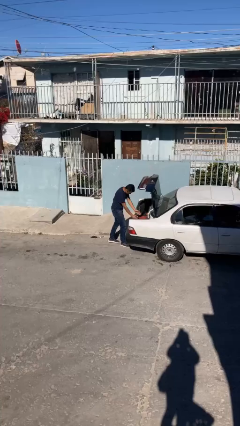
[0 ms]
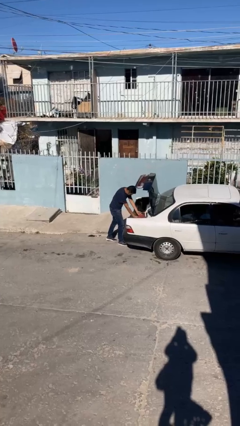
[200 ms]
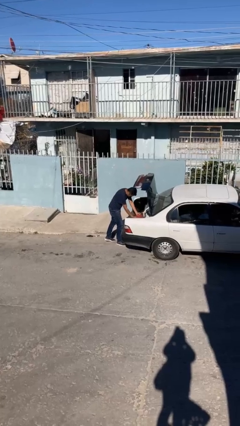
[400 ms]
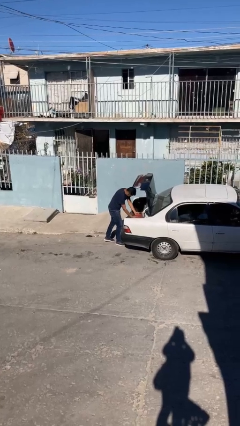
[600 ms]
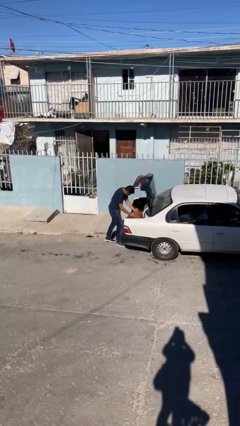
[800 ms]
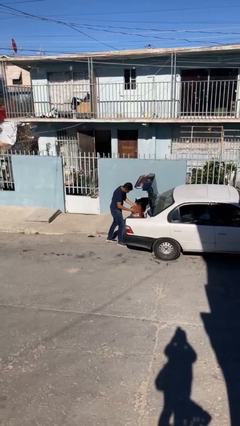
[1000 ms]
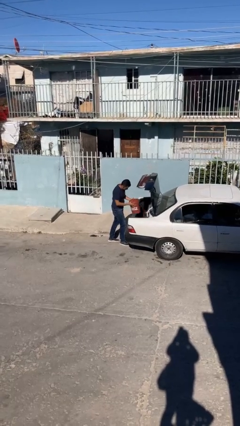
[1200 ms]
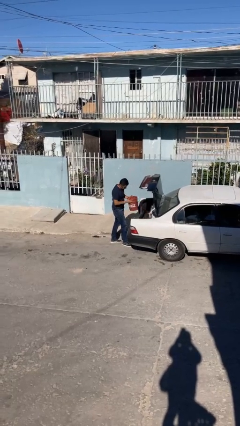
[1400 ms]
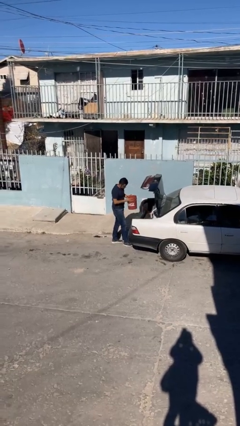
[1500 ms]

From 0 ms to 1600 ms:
person unloads car

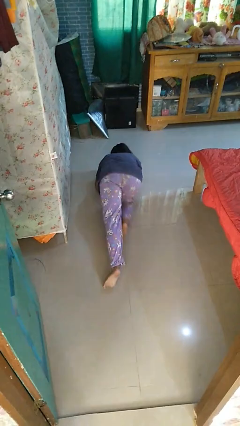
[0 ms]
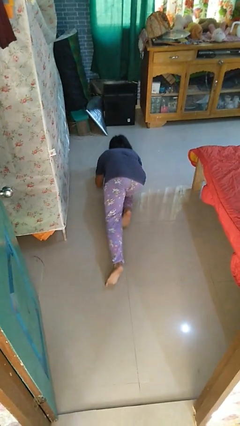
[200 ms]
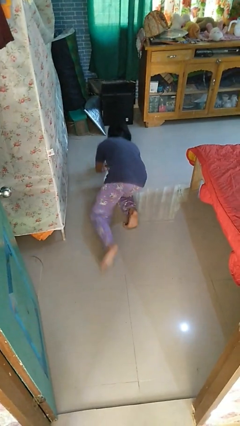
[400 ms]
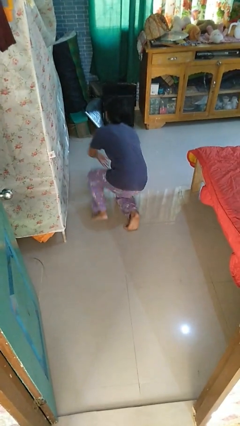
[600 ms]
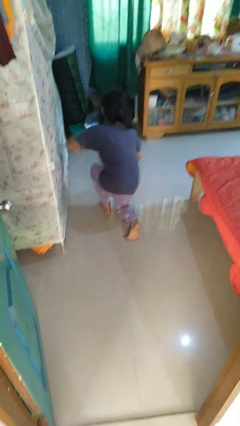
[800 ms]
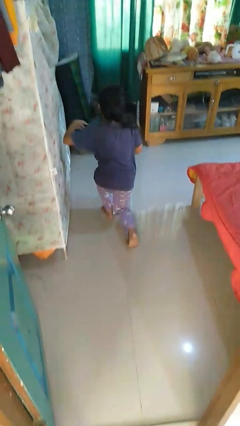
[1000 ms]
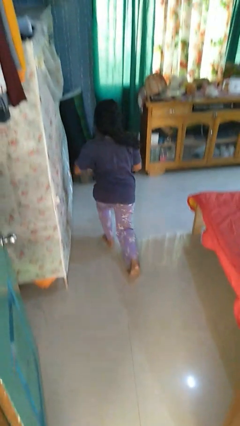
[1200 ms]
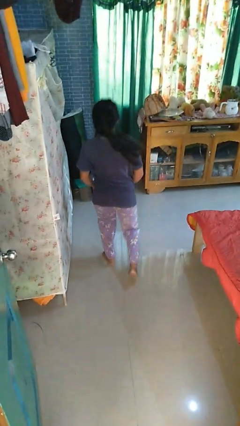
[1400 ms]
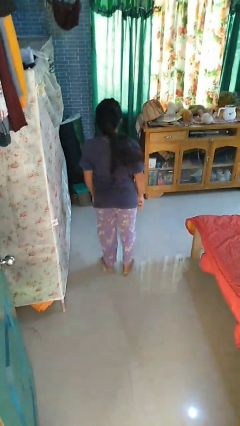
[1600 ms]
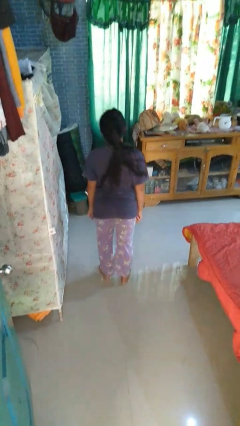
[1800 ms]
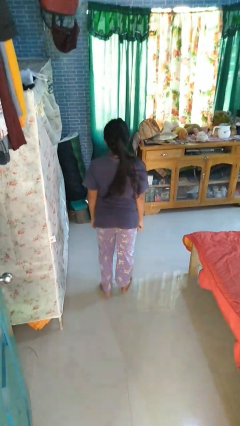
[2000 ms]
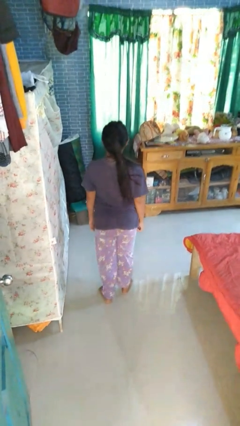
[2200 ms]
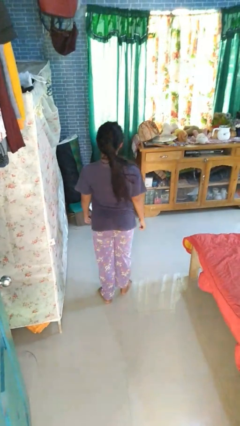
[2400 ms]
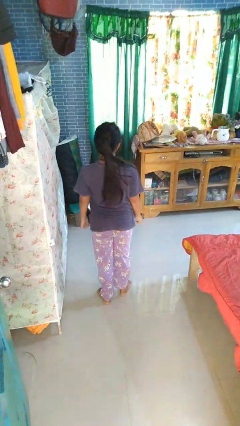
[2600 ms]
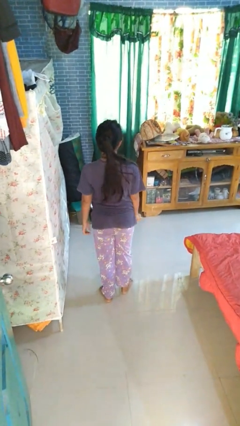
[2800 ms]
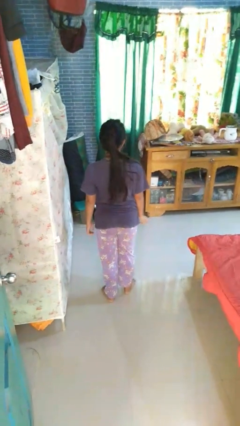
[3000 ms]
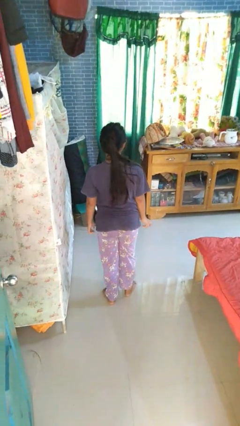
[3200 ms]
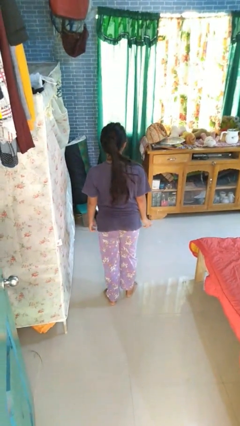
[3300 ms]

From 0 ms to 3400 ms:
person stands up from floor

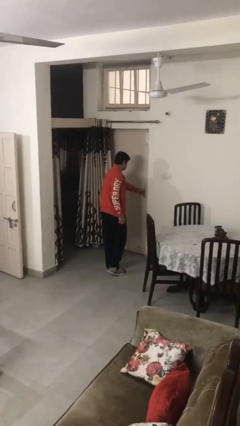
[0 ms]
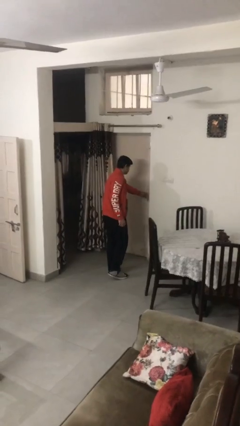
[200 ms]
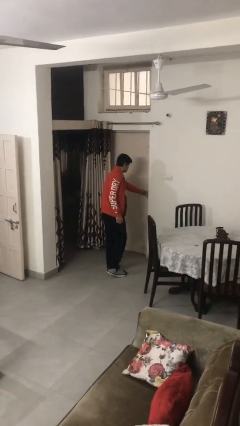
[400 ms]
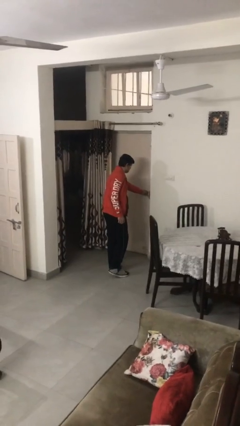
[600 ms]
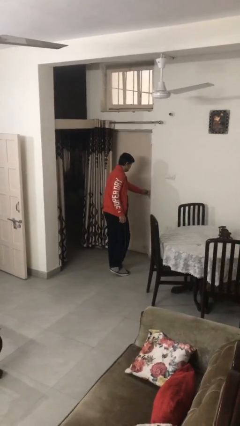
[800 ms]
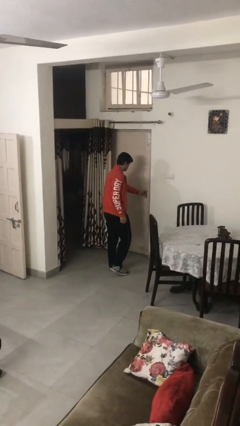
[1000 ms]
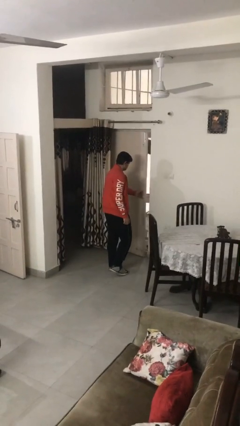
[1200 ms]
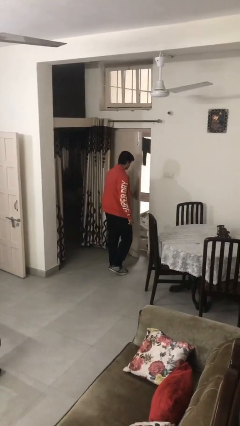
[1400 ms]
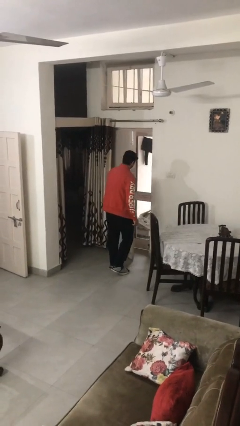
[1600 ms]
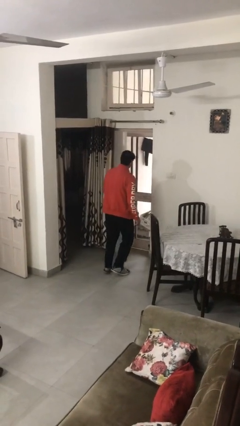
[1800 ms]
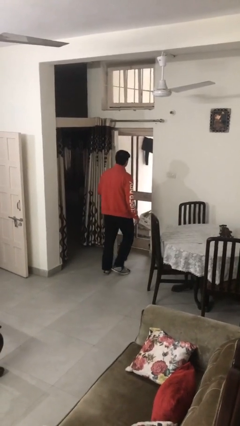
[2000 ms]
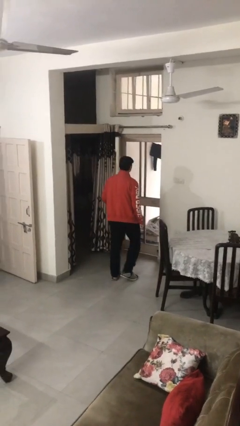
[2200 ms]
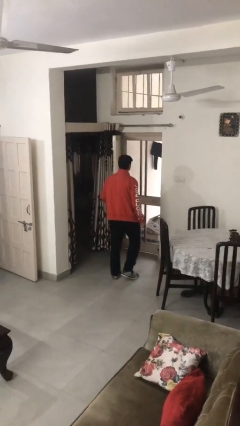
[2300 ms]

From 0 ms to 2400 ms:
person opens facility door

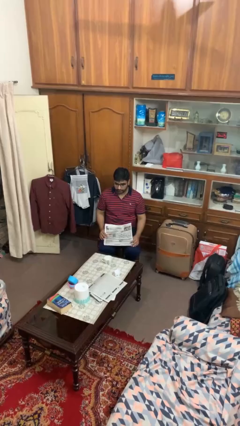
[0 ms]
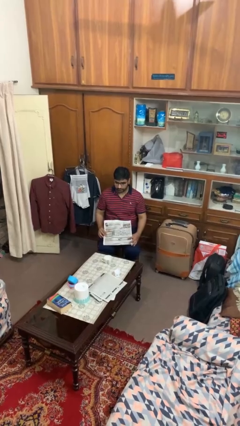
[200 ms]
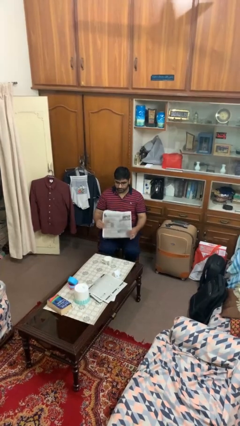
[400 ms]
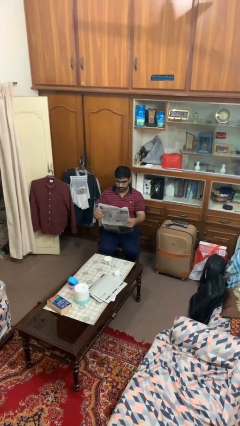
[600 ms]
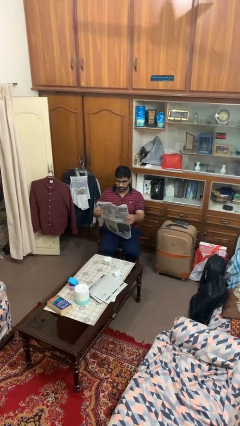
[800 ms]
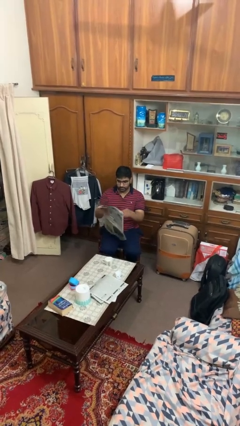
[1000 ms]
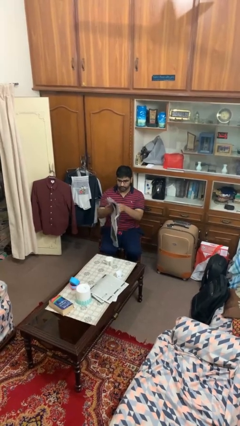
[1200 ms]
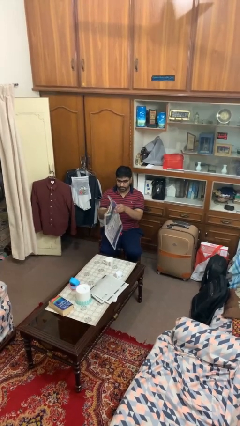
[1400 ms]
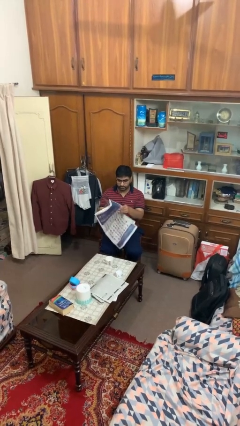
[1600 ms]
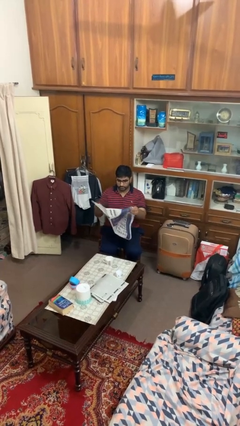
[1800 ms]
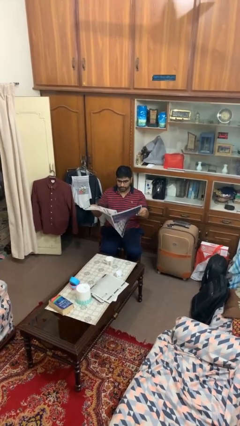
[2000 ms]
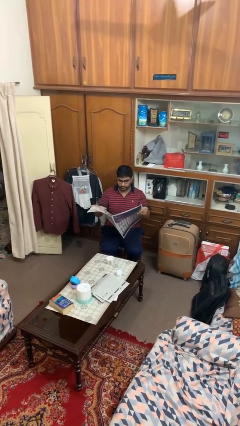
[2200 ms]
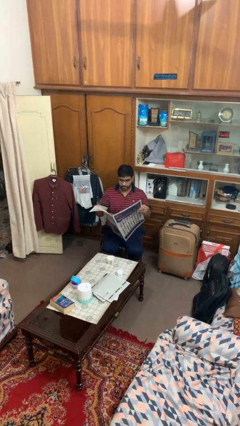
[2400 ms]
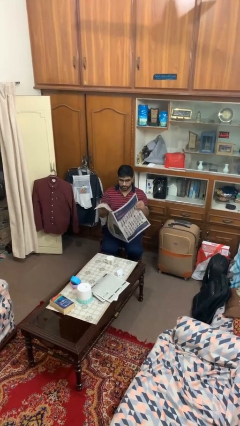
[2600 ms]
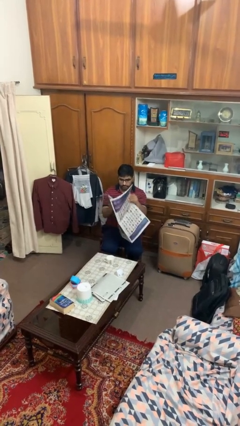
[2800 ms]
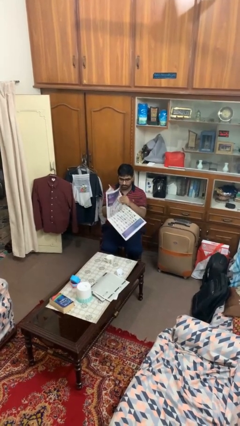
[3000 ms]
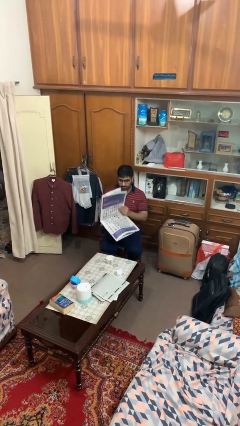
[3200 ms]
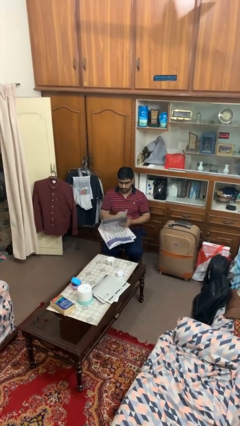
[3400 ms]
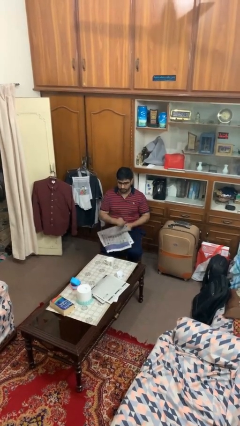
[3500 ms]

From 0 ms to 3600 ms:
person reads newspaper

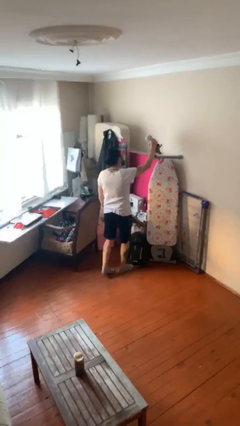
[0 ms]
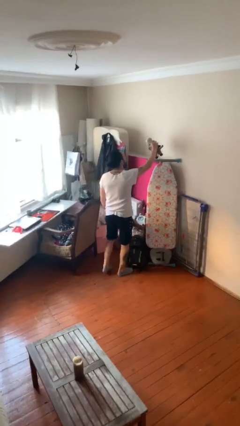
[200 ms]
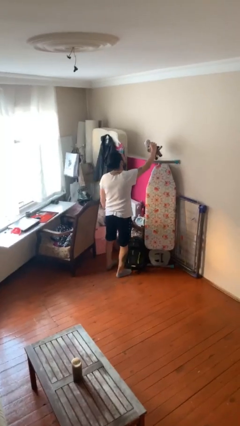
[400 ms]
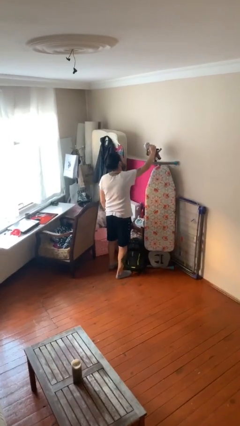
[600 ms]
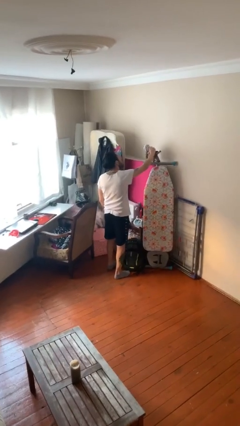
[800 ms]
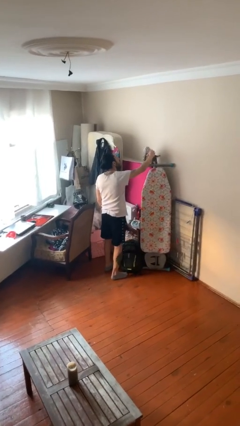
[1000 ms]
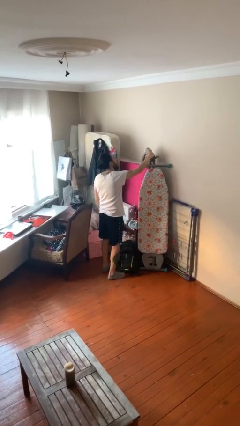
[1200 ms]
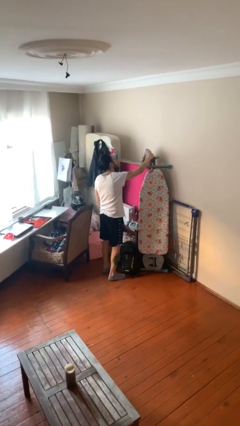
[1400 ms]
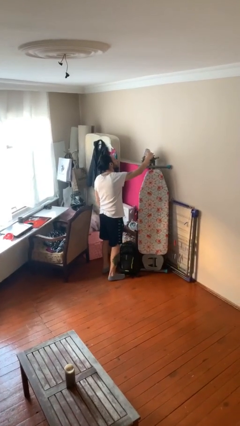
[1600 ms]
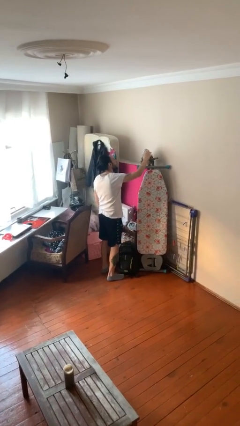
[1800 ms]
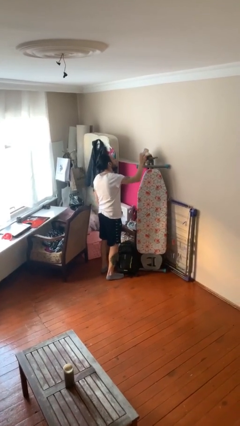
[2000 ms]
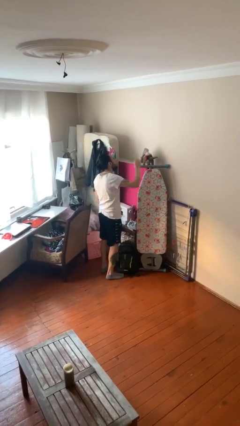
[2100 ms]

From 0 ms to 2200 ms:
person puts down object on shelf

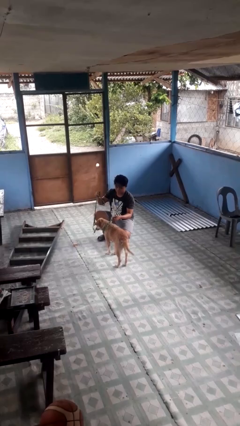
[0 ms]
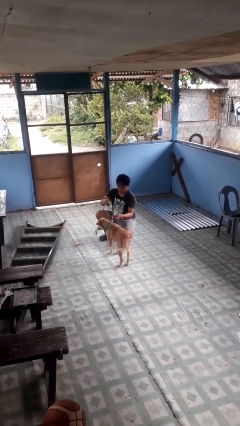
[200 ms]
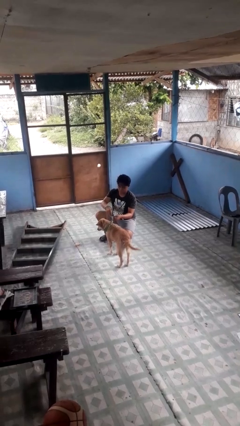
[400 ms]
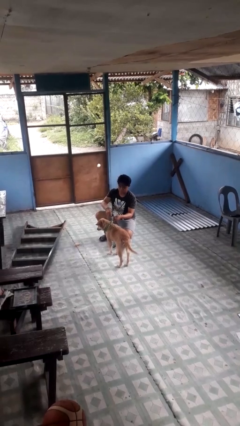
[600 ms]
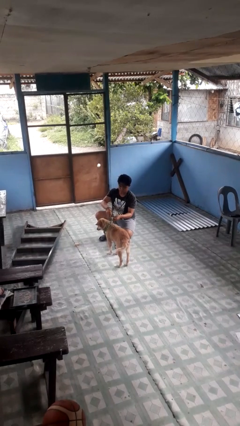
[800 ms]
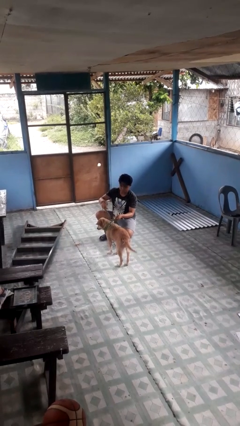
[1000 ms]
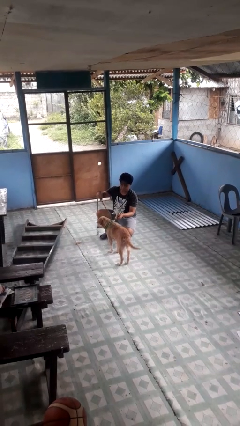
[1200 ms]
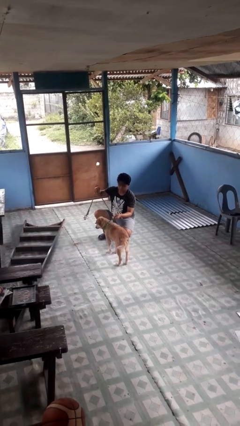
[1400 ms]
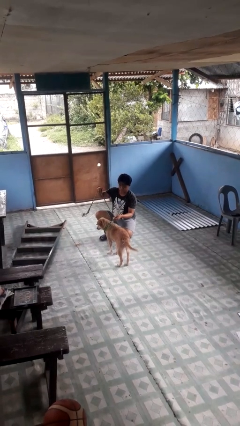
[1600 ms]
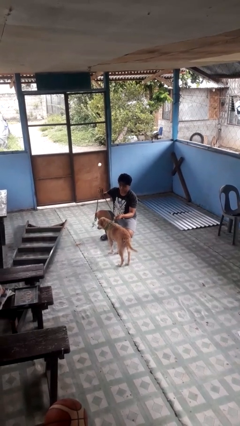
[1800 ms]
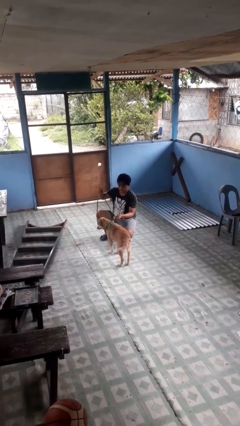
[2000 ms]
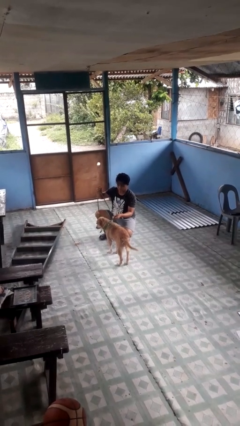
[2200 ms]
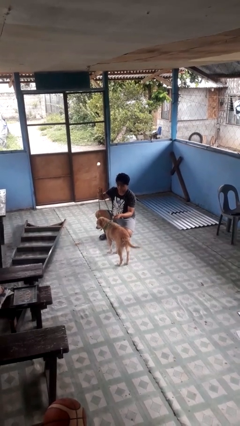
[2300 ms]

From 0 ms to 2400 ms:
person attaches leash to dog

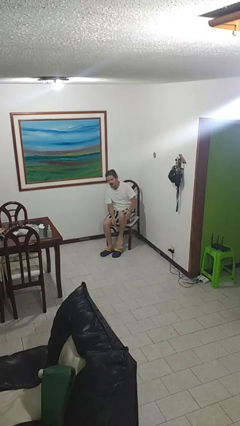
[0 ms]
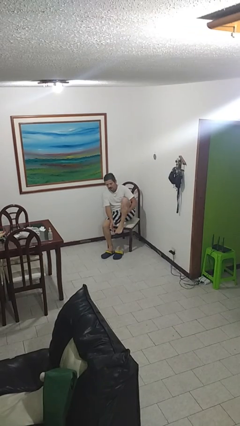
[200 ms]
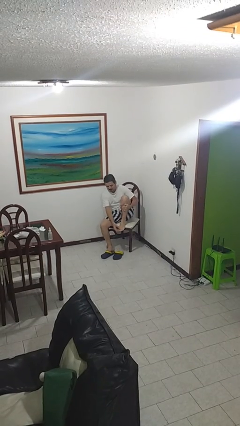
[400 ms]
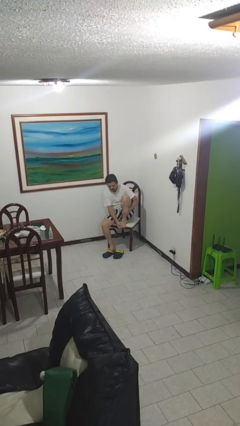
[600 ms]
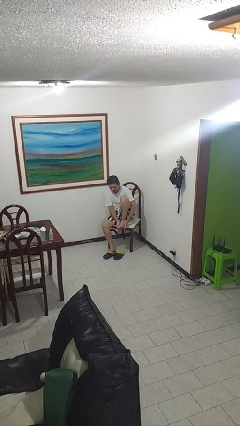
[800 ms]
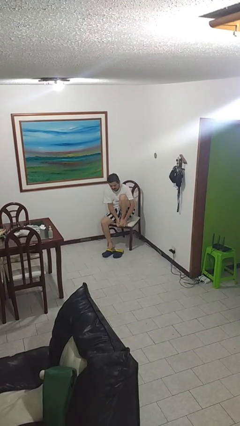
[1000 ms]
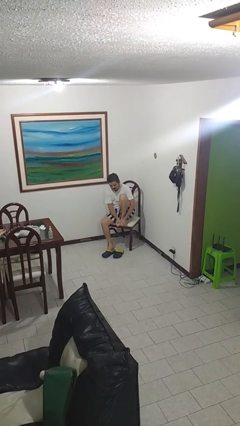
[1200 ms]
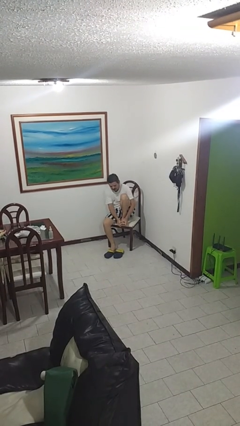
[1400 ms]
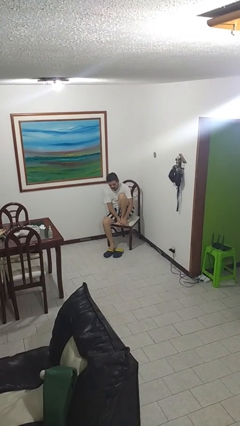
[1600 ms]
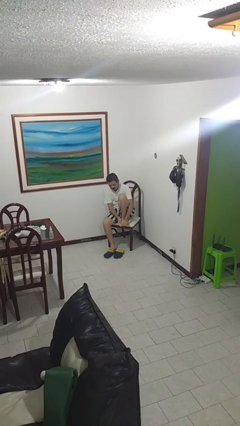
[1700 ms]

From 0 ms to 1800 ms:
person rubs foot
